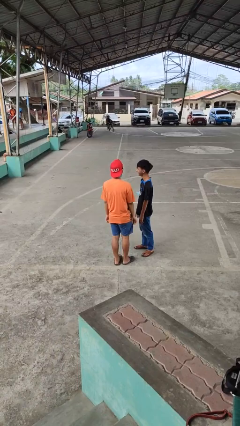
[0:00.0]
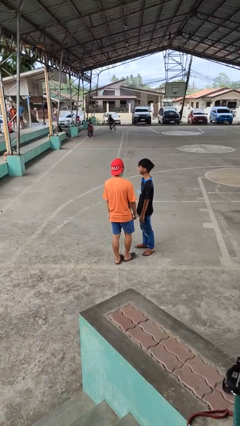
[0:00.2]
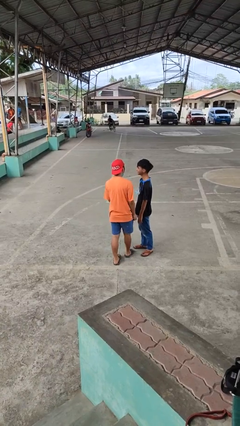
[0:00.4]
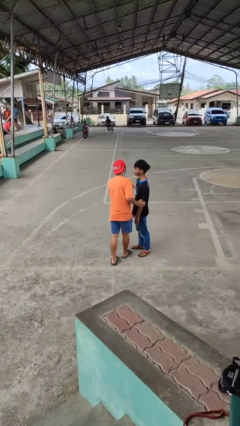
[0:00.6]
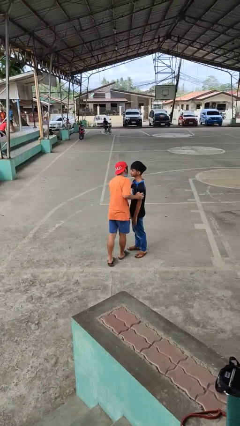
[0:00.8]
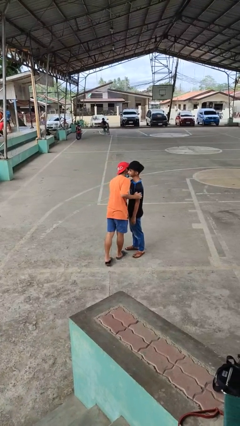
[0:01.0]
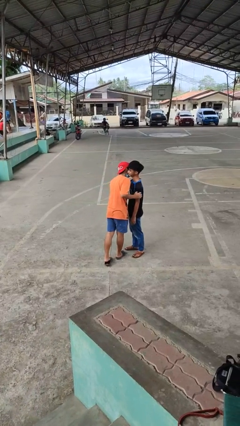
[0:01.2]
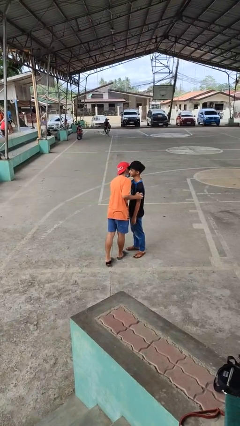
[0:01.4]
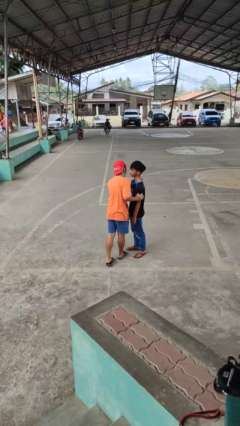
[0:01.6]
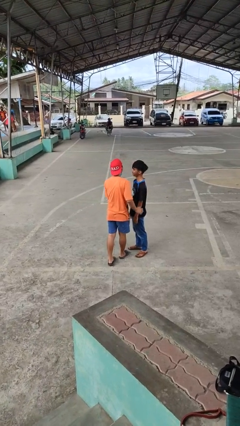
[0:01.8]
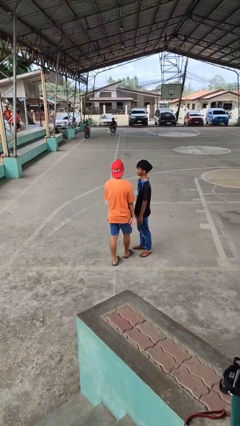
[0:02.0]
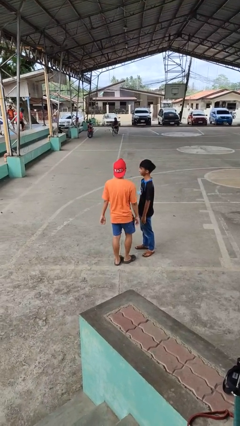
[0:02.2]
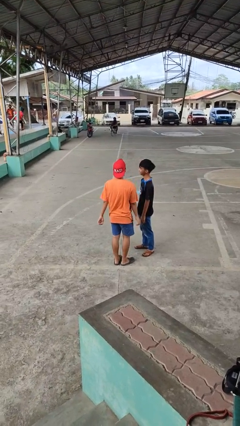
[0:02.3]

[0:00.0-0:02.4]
person kisses cheek of person

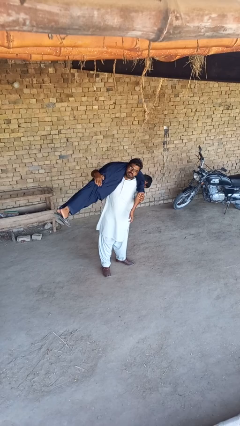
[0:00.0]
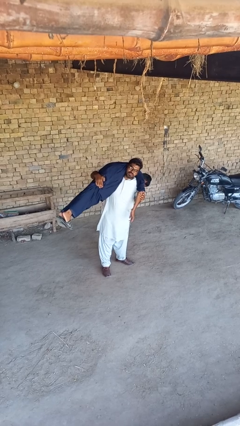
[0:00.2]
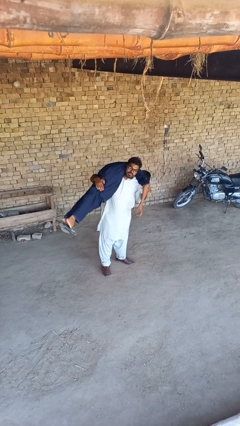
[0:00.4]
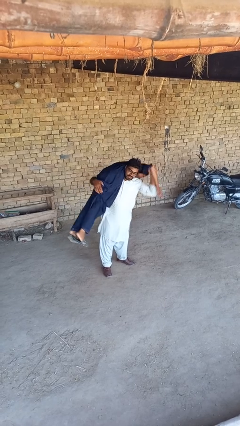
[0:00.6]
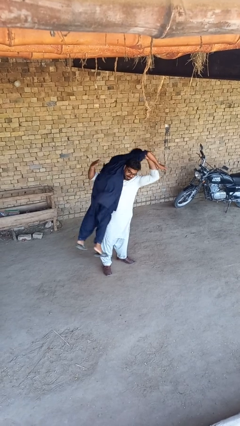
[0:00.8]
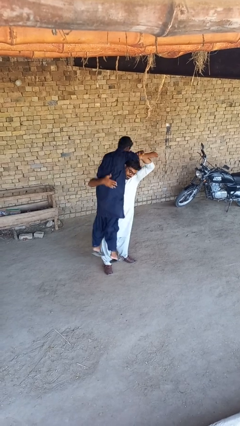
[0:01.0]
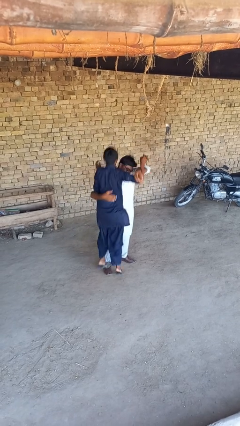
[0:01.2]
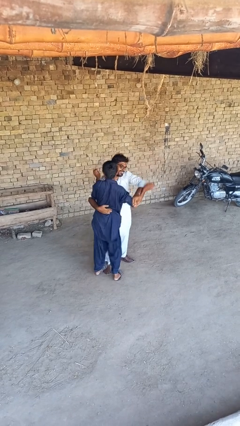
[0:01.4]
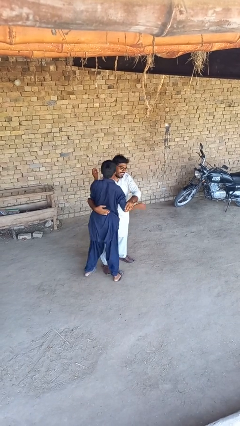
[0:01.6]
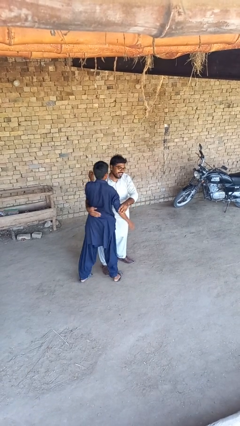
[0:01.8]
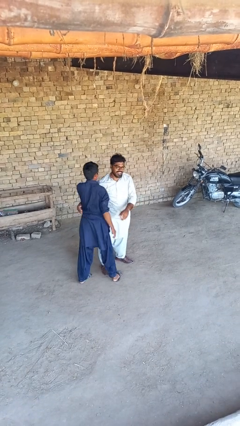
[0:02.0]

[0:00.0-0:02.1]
person puts down person

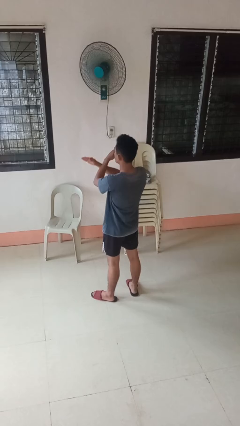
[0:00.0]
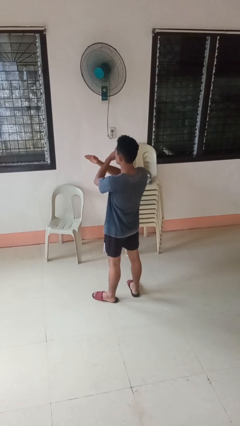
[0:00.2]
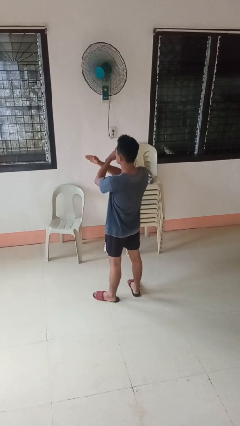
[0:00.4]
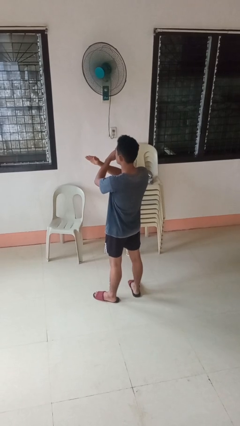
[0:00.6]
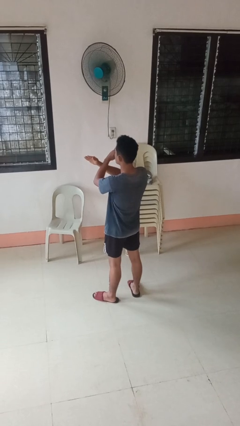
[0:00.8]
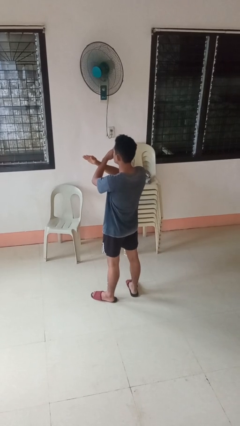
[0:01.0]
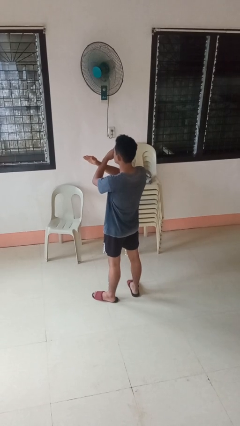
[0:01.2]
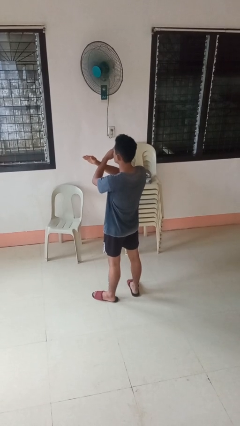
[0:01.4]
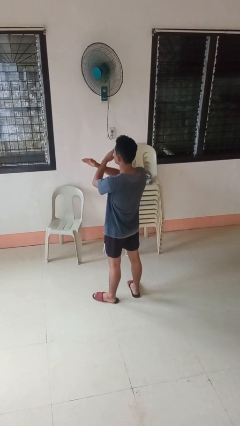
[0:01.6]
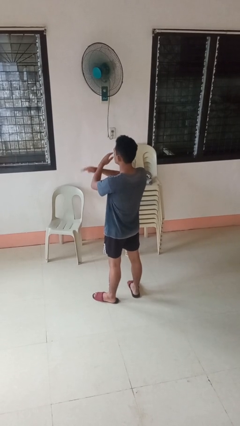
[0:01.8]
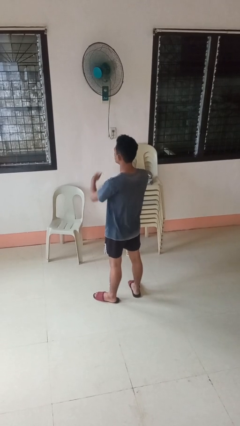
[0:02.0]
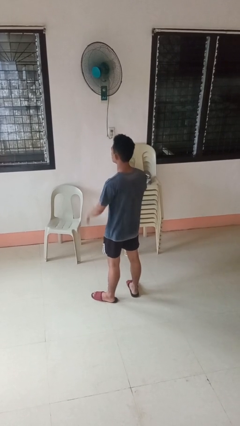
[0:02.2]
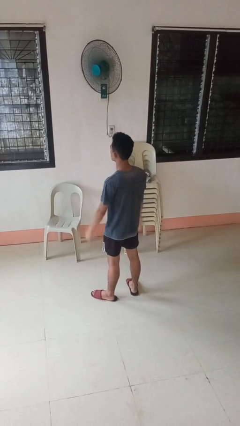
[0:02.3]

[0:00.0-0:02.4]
person gestures arms x

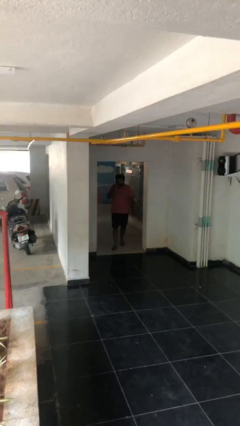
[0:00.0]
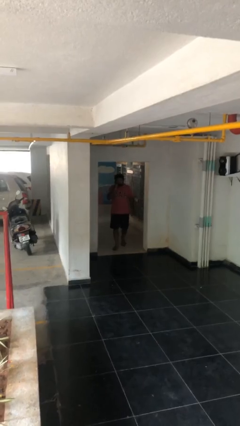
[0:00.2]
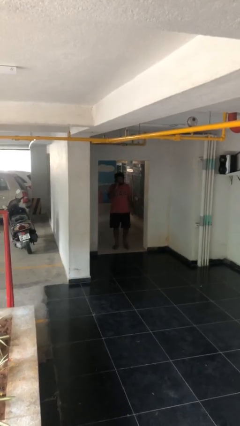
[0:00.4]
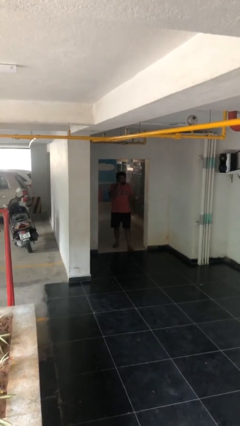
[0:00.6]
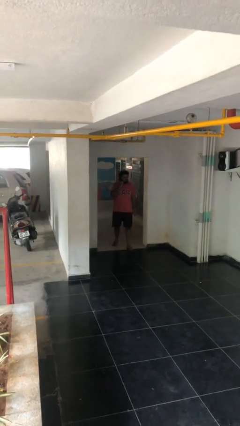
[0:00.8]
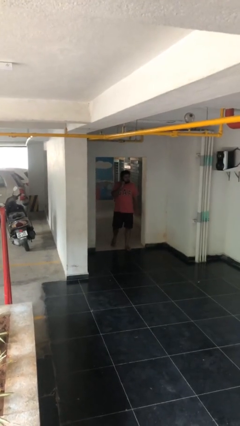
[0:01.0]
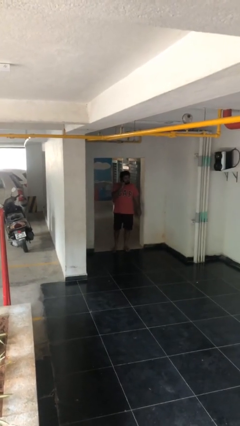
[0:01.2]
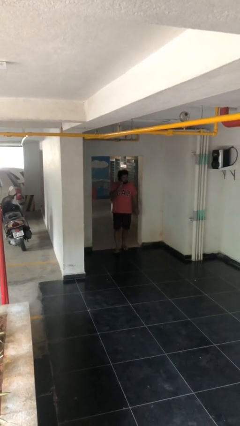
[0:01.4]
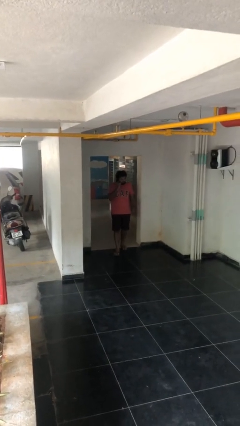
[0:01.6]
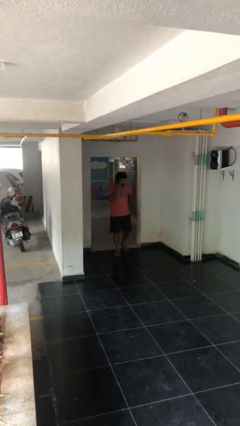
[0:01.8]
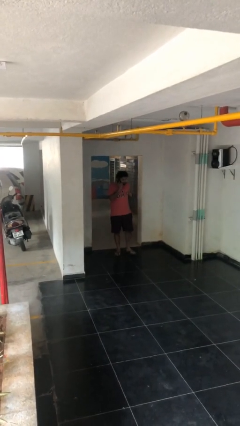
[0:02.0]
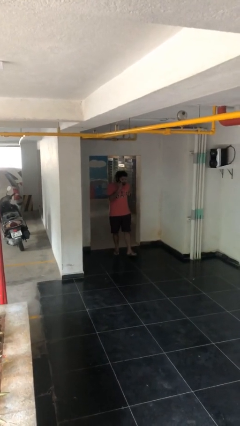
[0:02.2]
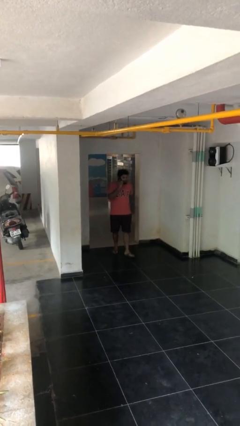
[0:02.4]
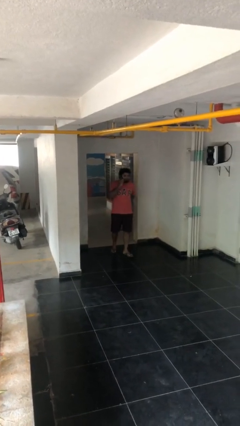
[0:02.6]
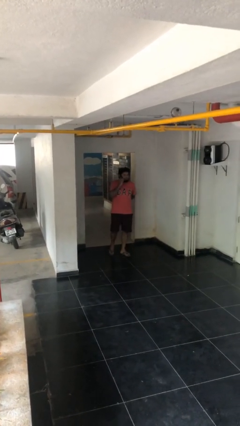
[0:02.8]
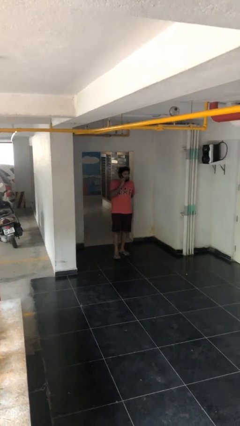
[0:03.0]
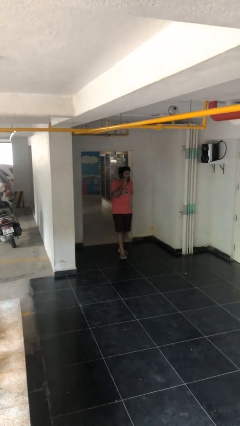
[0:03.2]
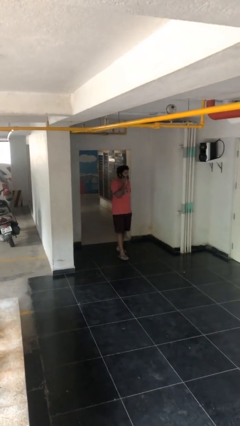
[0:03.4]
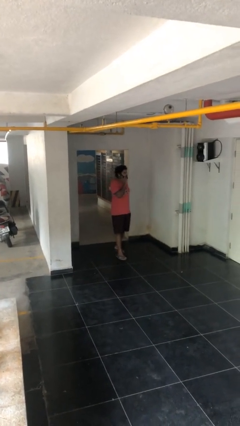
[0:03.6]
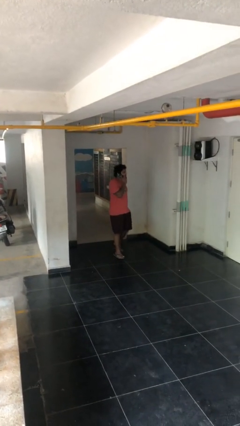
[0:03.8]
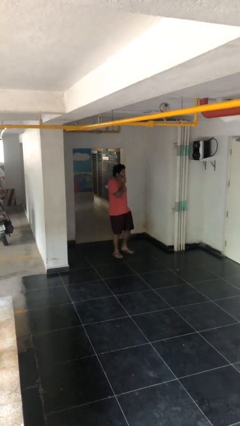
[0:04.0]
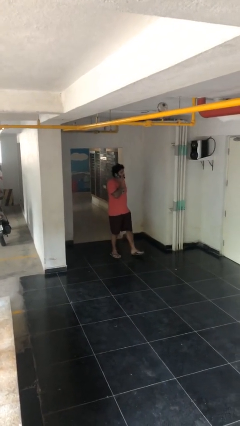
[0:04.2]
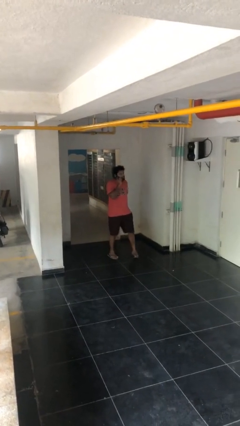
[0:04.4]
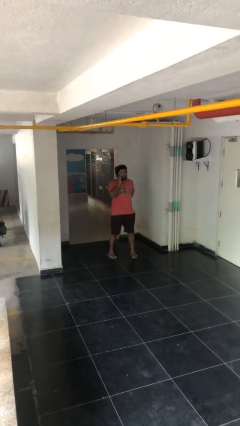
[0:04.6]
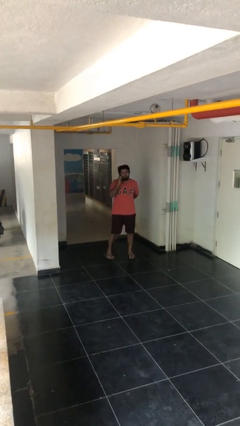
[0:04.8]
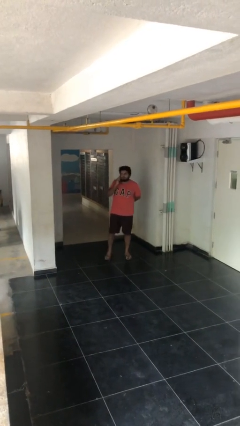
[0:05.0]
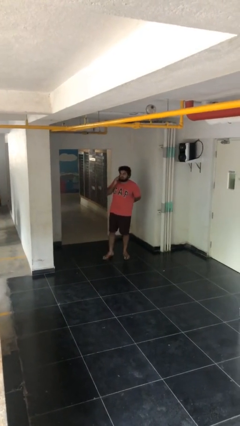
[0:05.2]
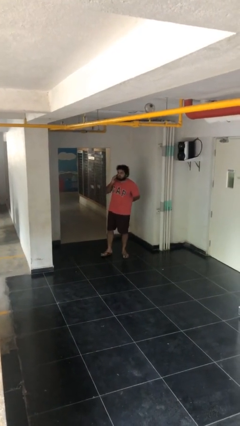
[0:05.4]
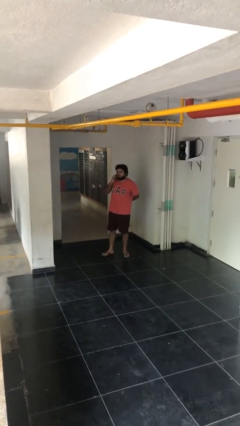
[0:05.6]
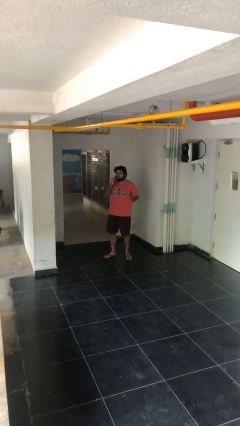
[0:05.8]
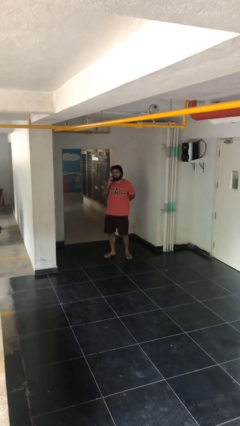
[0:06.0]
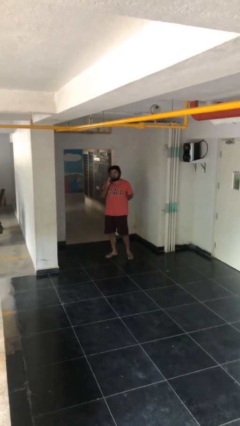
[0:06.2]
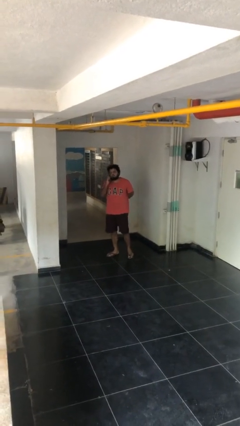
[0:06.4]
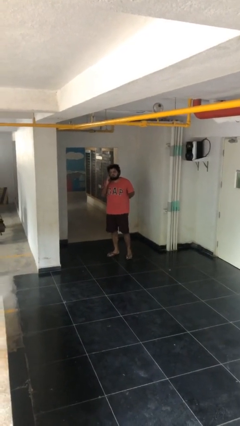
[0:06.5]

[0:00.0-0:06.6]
person enters scene through structure

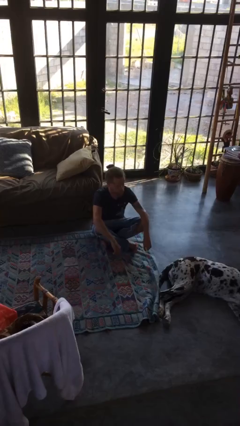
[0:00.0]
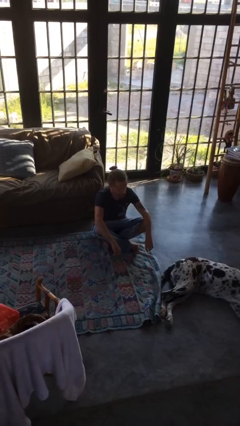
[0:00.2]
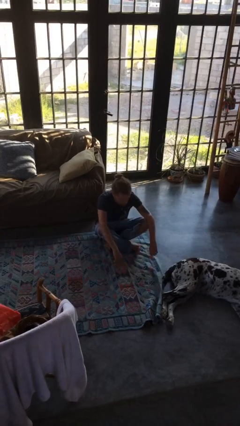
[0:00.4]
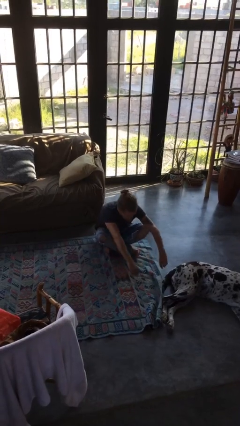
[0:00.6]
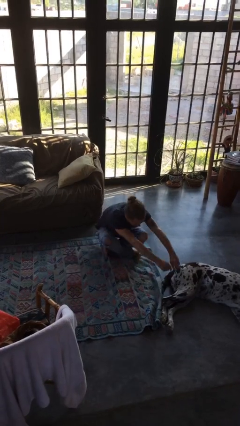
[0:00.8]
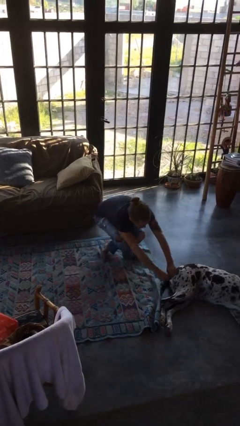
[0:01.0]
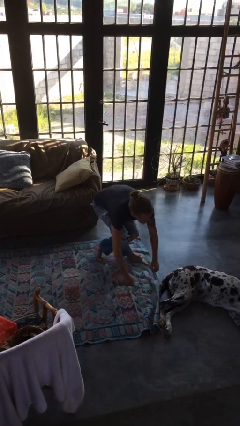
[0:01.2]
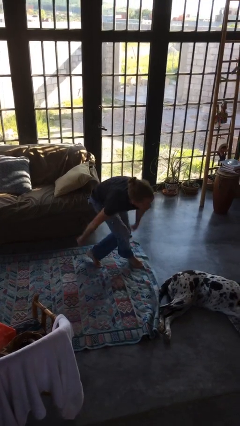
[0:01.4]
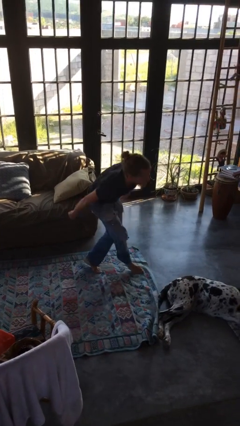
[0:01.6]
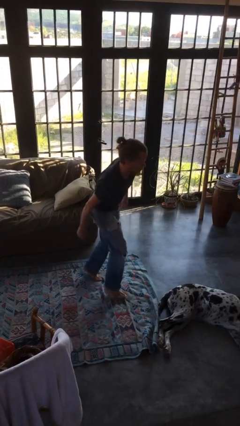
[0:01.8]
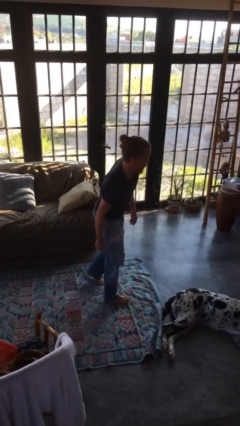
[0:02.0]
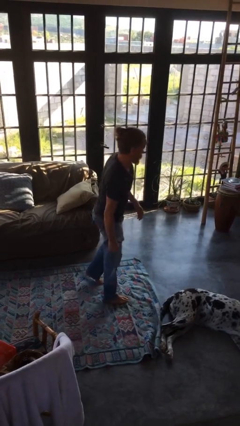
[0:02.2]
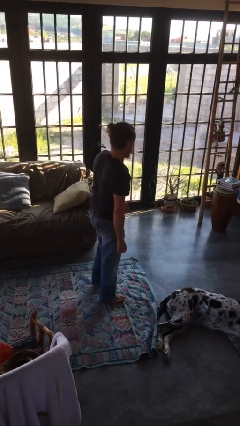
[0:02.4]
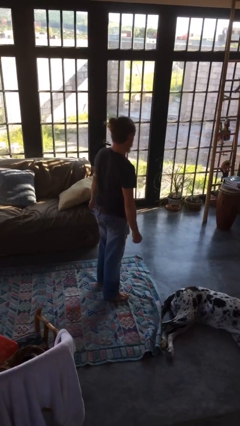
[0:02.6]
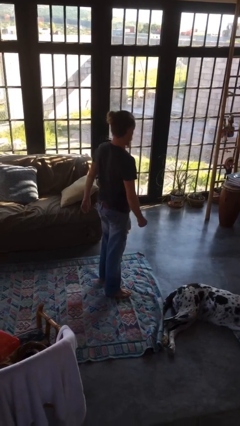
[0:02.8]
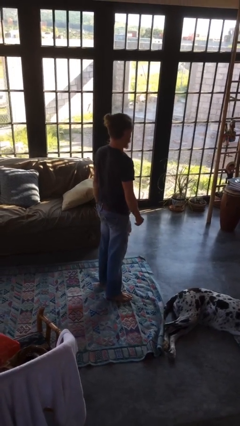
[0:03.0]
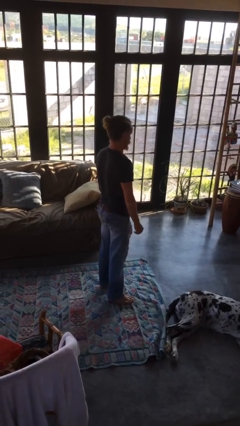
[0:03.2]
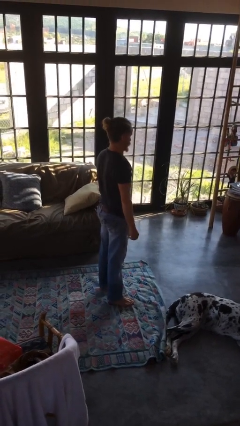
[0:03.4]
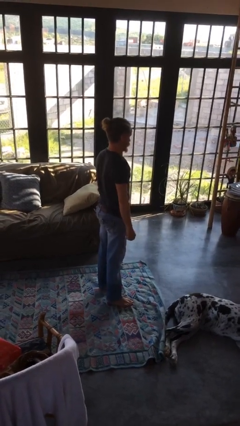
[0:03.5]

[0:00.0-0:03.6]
person stands up from floor

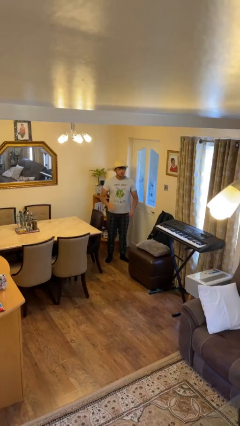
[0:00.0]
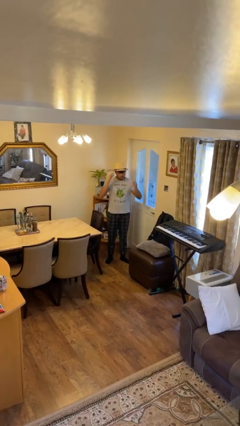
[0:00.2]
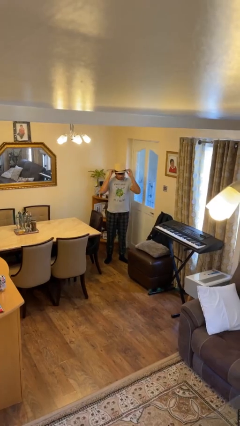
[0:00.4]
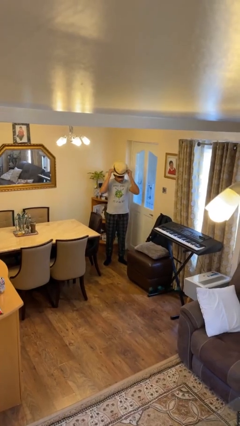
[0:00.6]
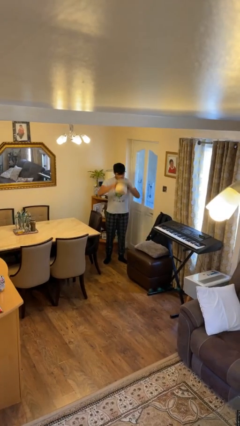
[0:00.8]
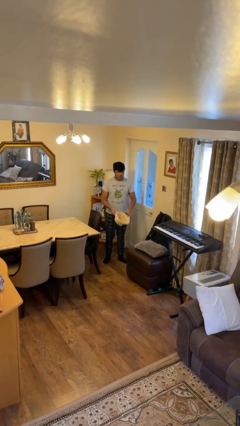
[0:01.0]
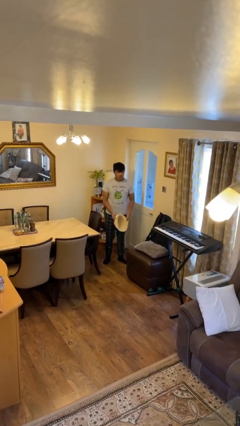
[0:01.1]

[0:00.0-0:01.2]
person takes off hat
